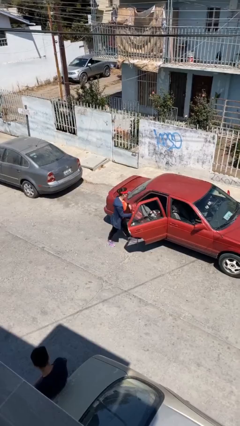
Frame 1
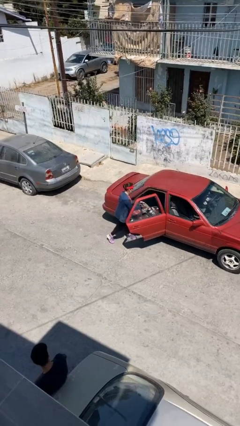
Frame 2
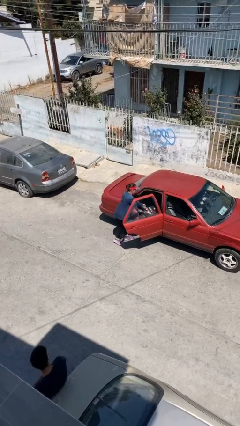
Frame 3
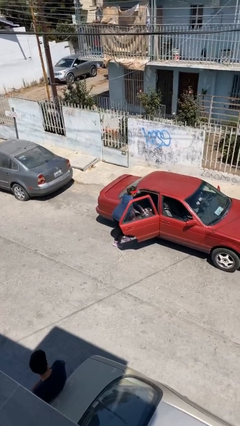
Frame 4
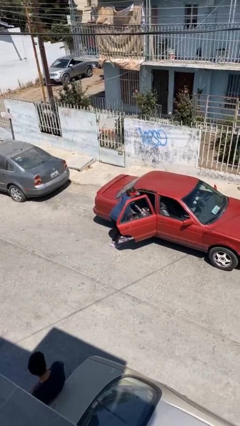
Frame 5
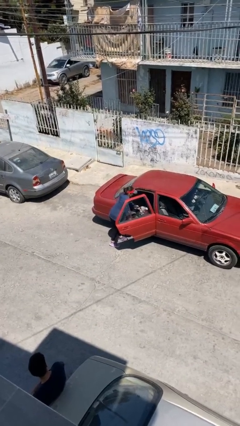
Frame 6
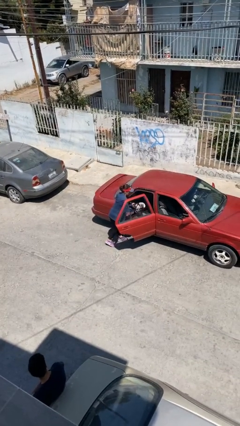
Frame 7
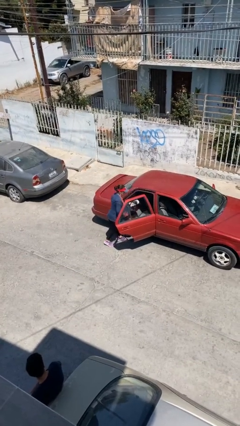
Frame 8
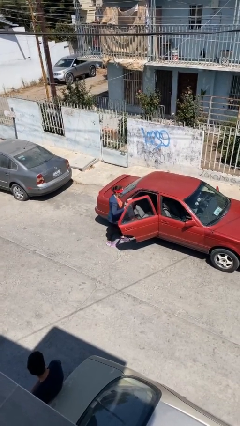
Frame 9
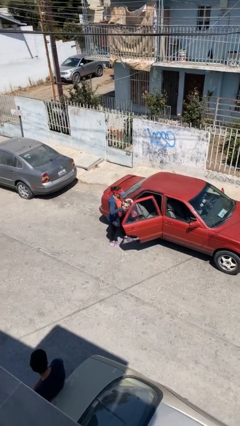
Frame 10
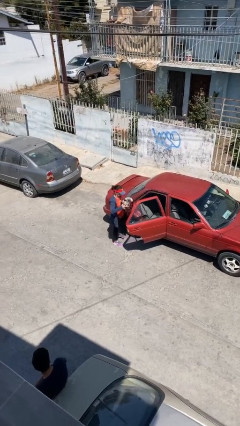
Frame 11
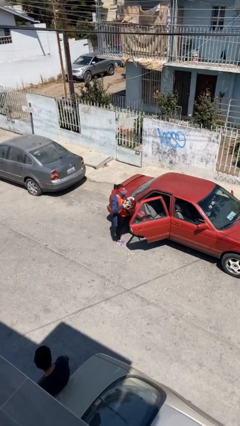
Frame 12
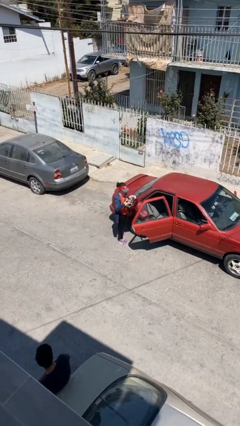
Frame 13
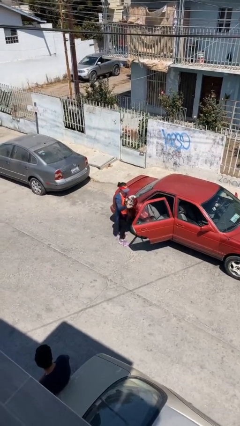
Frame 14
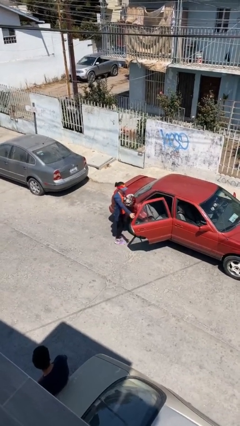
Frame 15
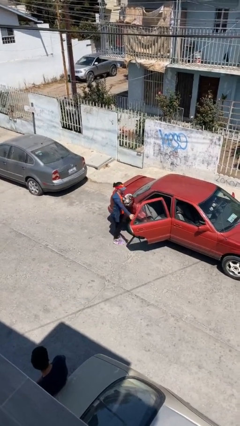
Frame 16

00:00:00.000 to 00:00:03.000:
person unloads car

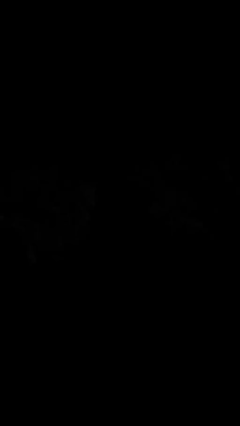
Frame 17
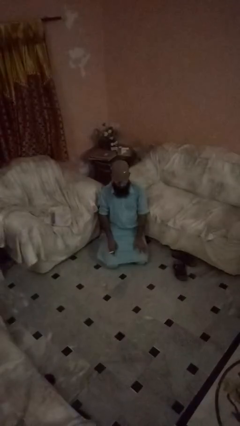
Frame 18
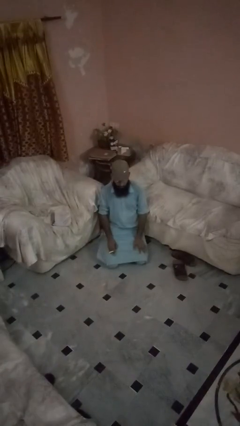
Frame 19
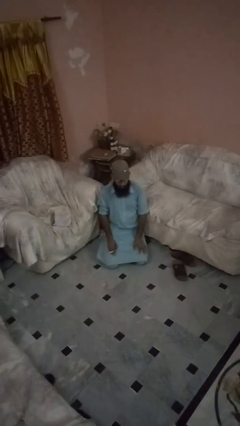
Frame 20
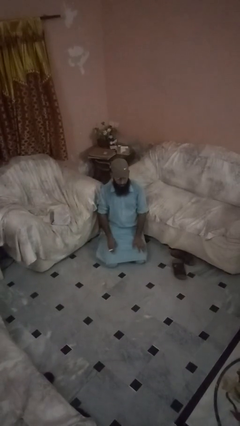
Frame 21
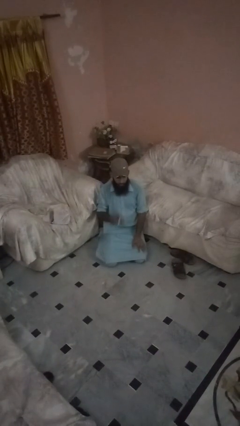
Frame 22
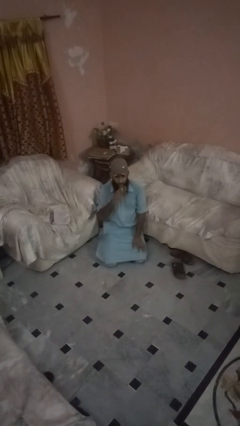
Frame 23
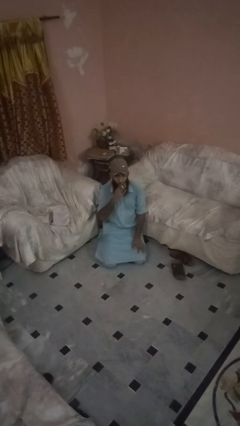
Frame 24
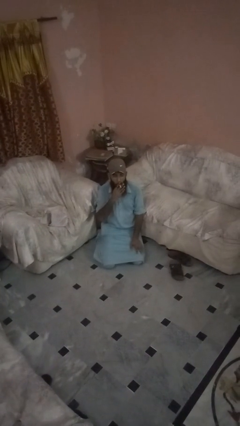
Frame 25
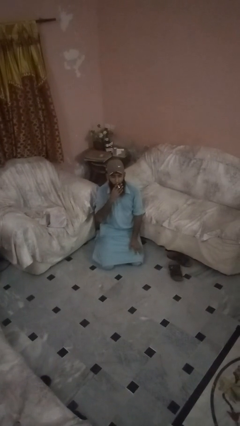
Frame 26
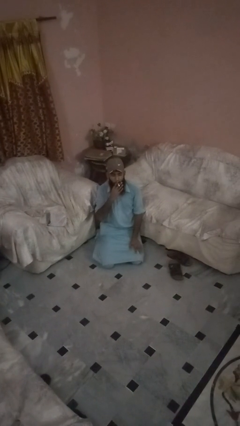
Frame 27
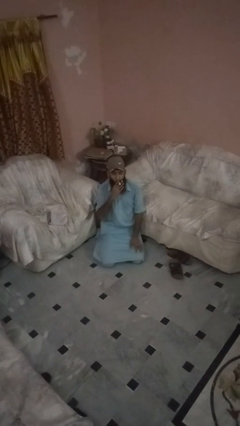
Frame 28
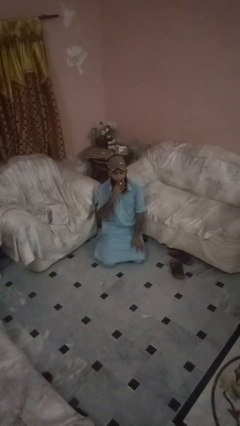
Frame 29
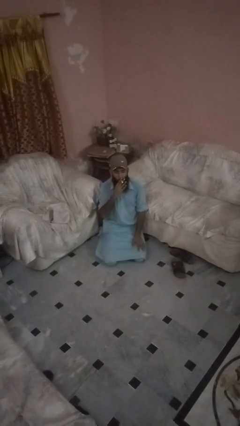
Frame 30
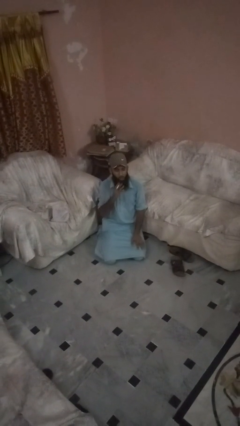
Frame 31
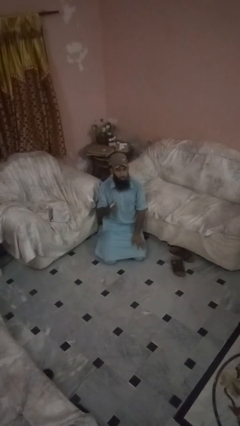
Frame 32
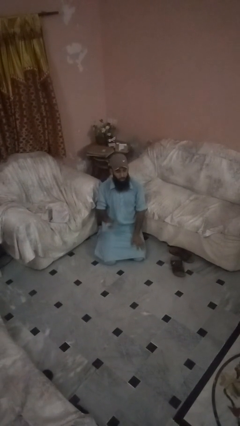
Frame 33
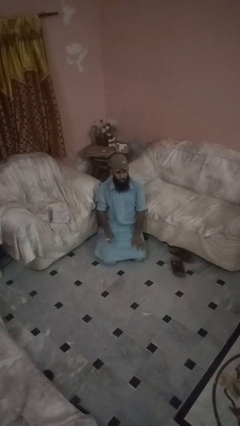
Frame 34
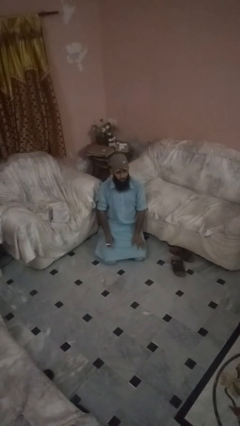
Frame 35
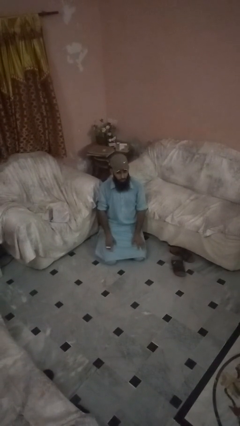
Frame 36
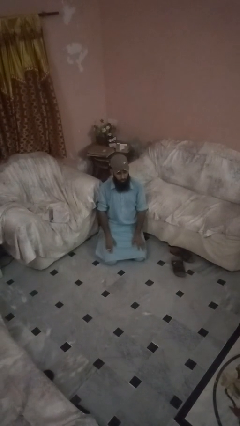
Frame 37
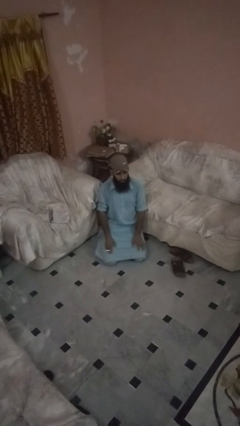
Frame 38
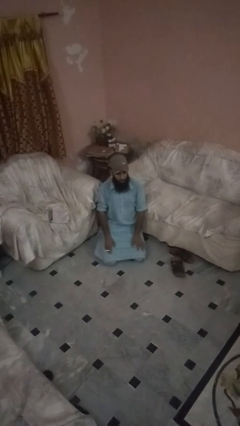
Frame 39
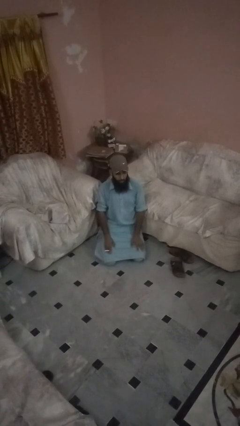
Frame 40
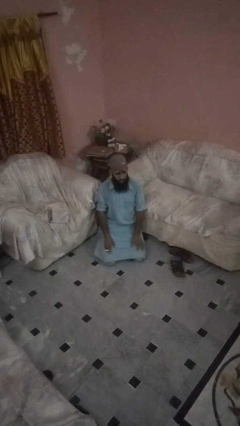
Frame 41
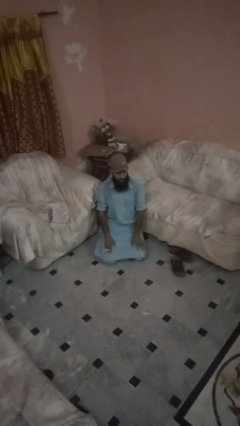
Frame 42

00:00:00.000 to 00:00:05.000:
person vapes

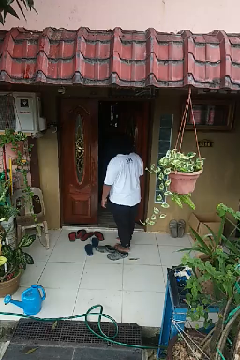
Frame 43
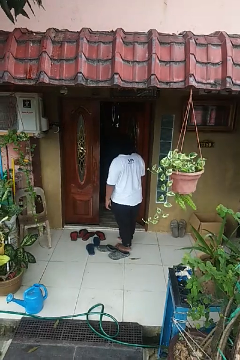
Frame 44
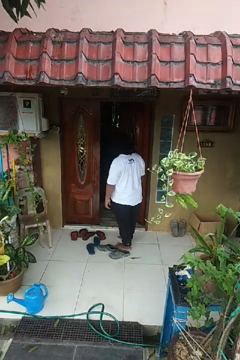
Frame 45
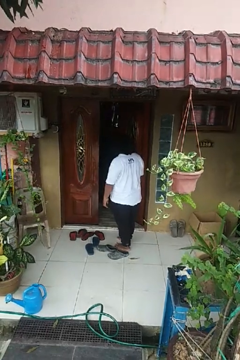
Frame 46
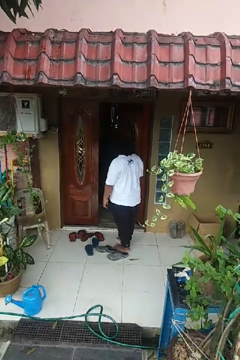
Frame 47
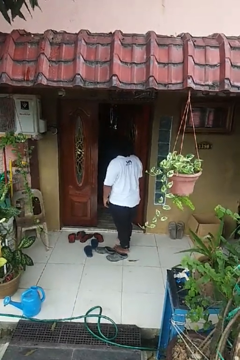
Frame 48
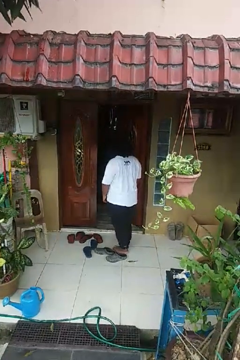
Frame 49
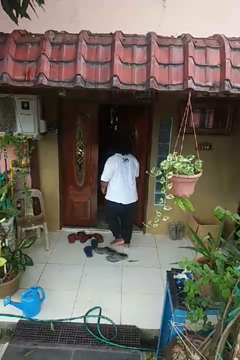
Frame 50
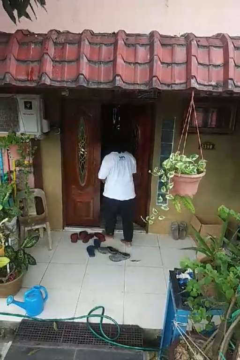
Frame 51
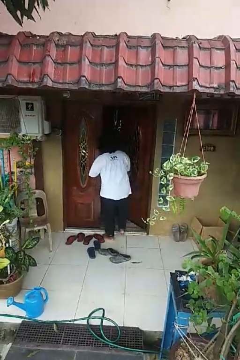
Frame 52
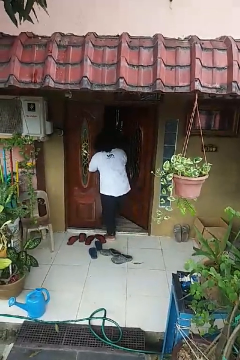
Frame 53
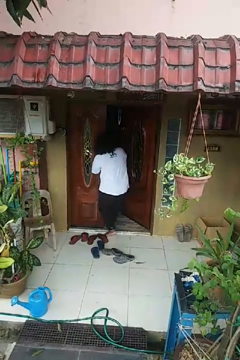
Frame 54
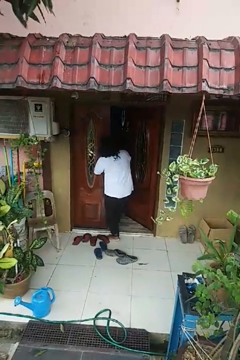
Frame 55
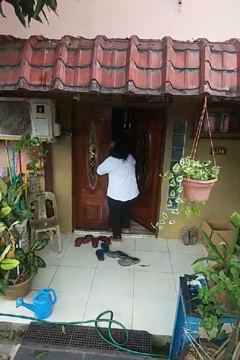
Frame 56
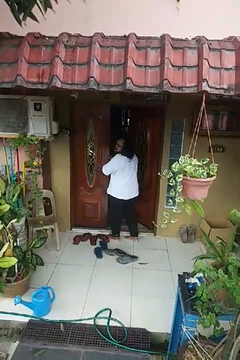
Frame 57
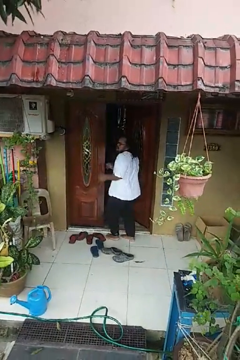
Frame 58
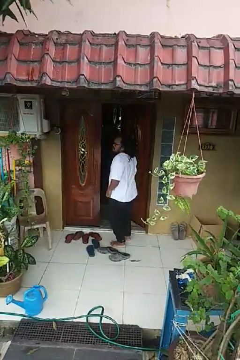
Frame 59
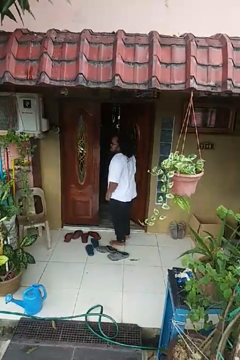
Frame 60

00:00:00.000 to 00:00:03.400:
person bumps into wall

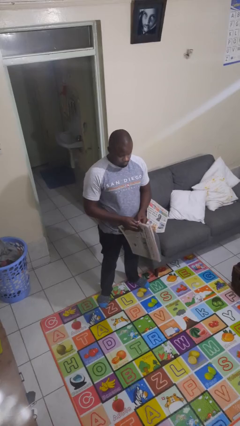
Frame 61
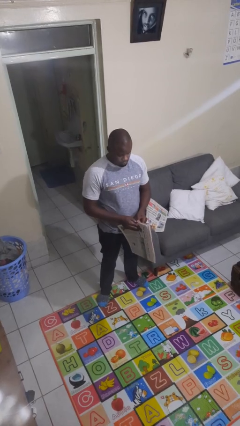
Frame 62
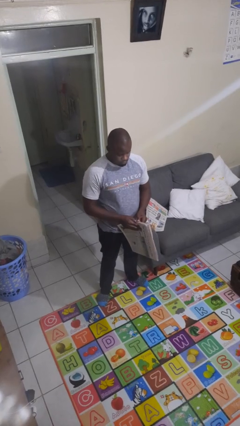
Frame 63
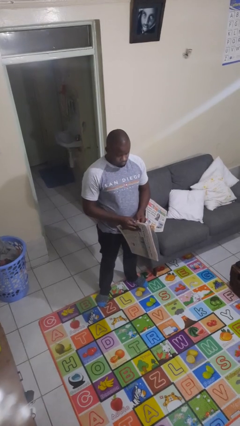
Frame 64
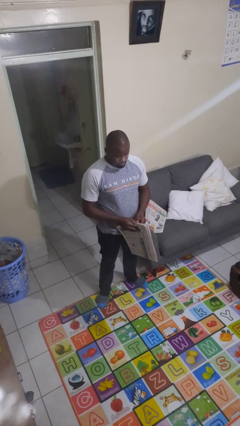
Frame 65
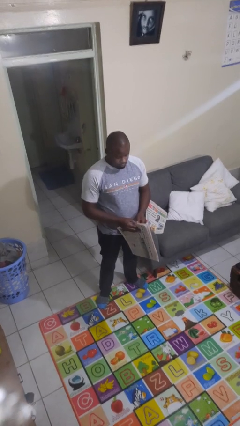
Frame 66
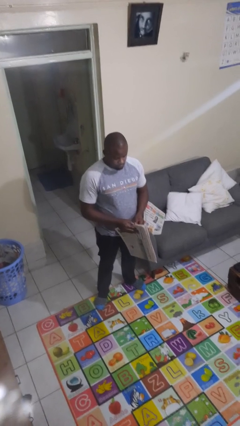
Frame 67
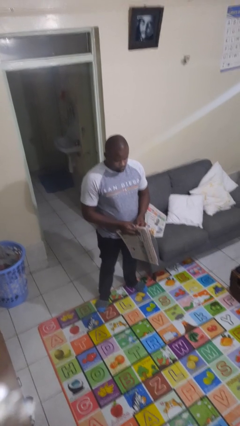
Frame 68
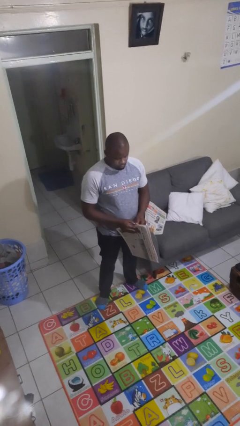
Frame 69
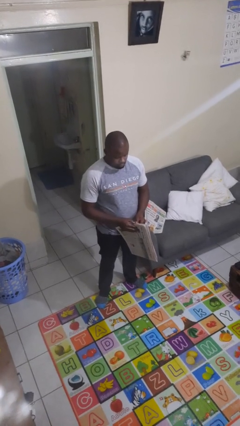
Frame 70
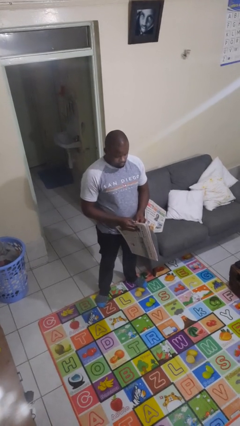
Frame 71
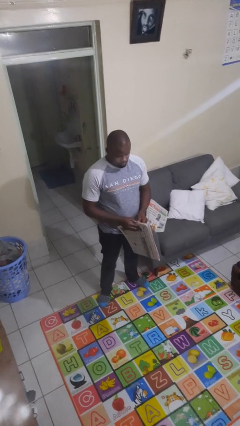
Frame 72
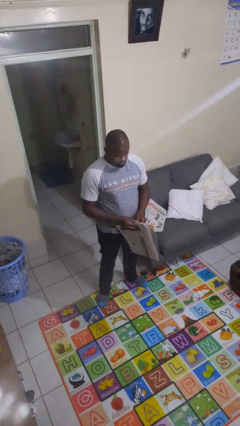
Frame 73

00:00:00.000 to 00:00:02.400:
person reads newspaper

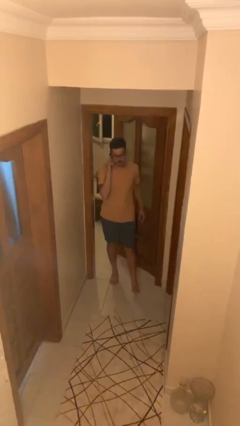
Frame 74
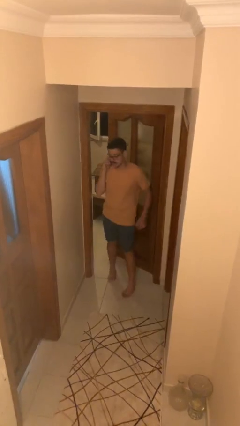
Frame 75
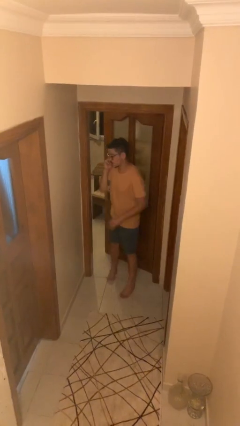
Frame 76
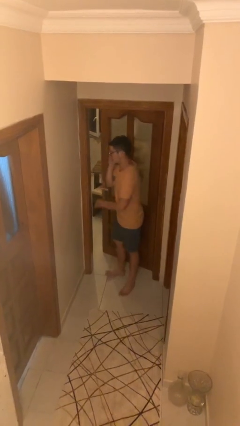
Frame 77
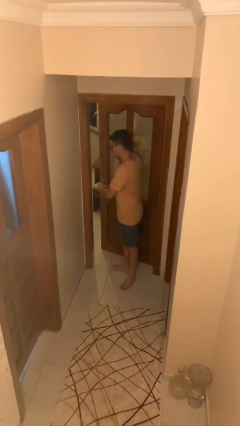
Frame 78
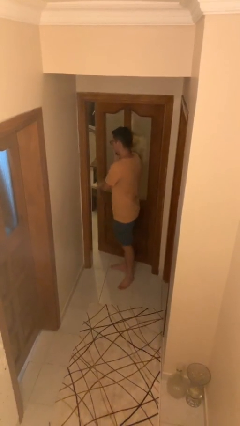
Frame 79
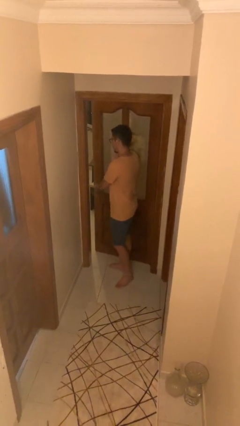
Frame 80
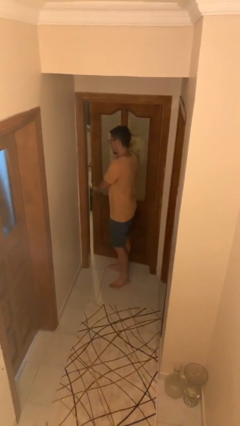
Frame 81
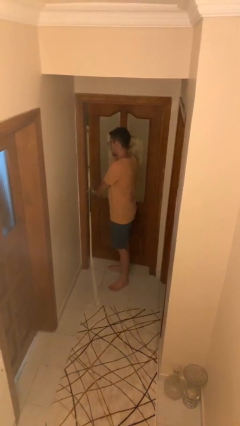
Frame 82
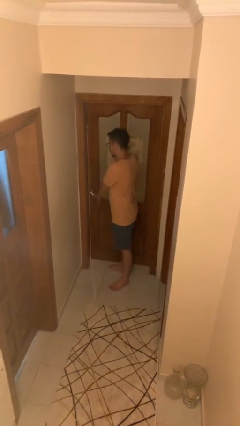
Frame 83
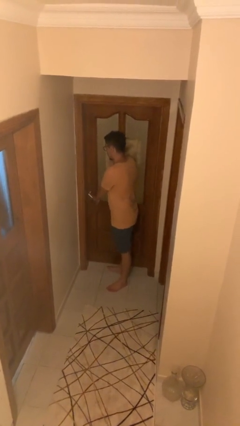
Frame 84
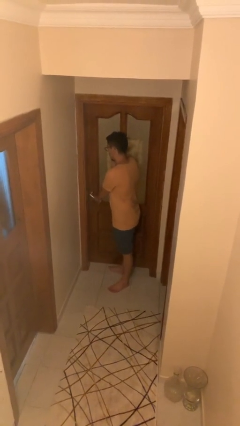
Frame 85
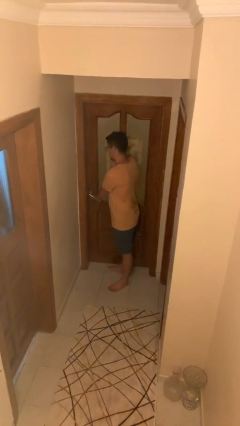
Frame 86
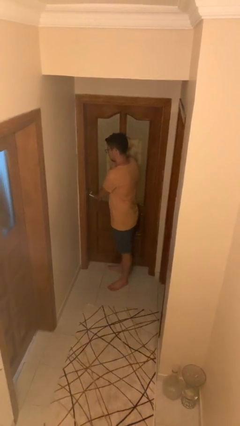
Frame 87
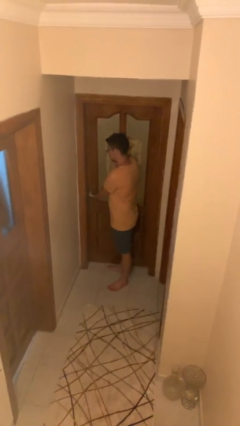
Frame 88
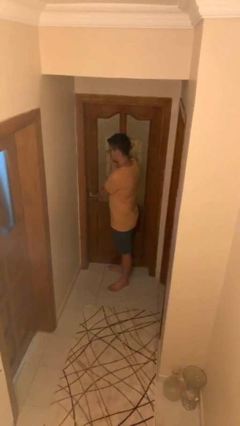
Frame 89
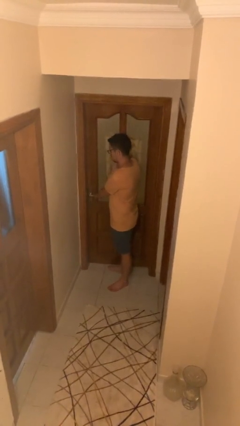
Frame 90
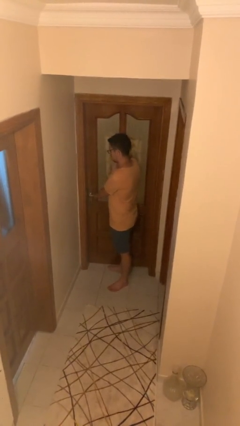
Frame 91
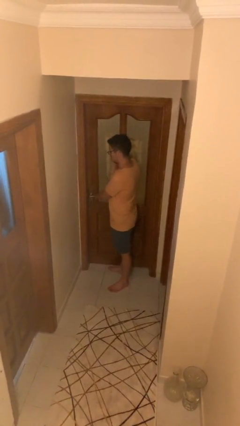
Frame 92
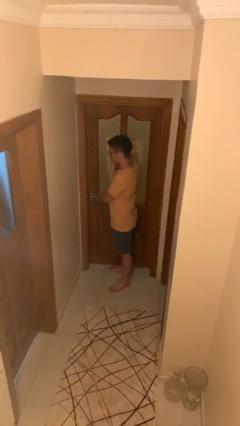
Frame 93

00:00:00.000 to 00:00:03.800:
person closes facility door

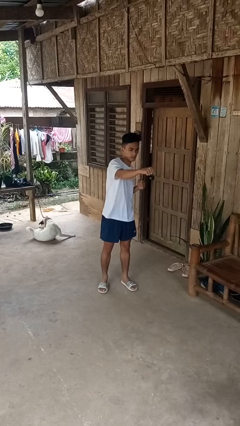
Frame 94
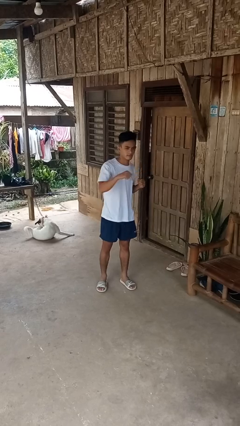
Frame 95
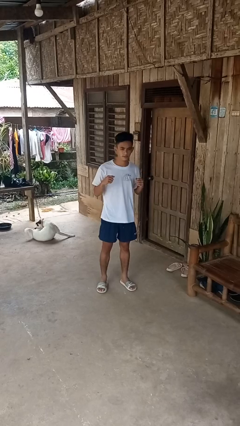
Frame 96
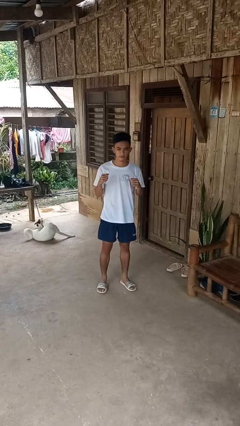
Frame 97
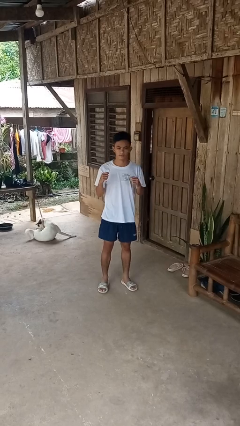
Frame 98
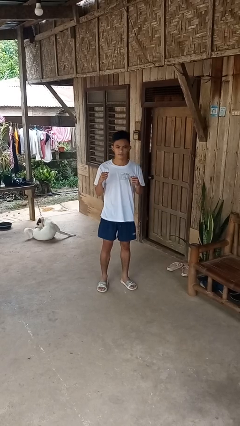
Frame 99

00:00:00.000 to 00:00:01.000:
person punches
